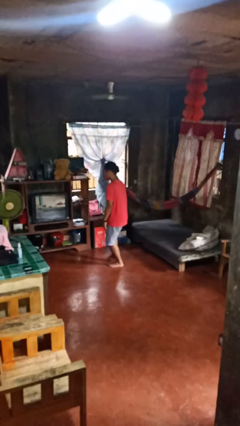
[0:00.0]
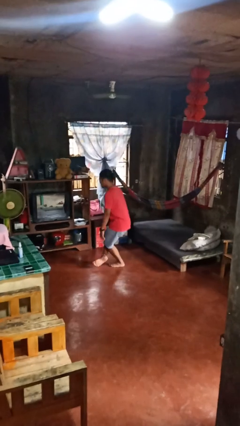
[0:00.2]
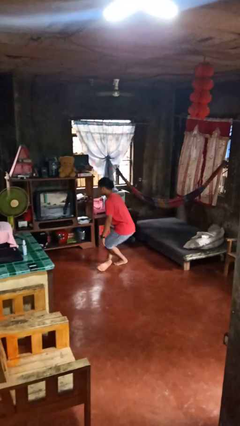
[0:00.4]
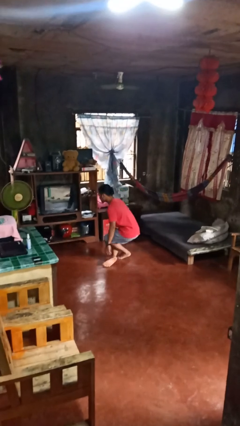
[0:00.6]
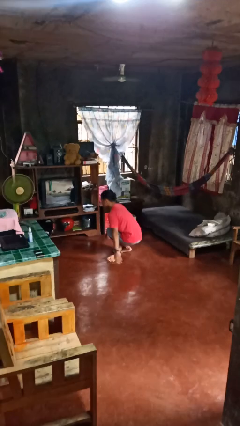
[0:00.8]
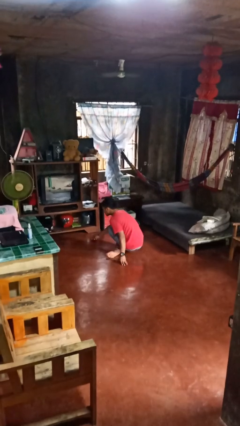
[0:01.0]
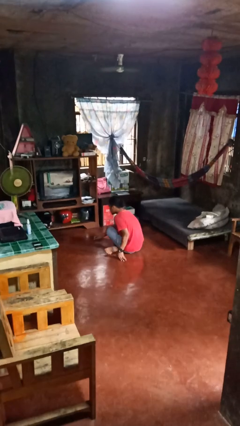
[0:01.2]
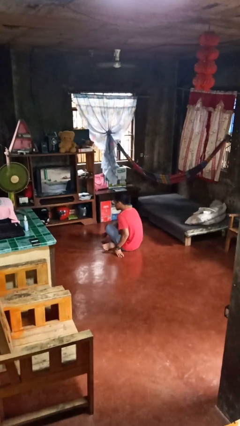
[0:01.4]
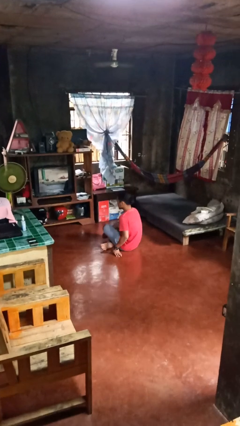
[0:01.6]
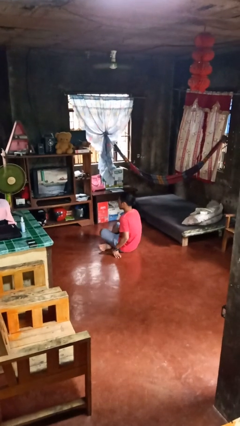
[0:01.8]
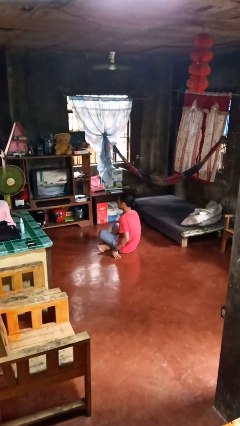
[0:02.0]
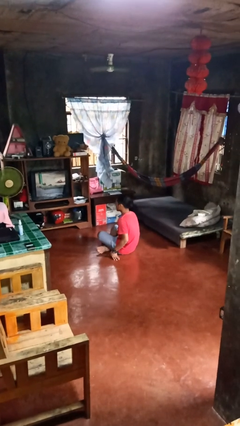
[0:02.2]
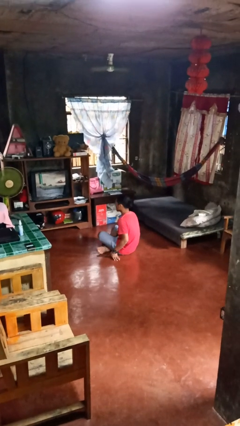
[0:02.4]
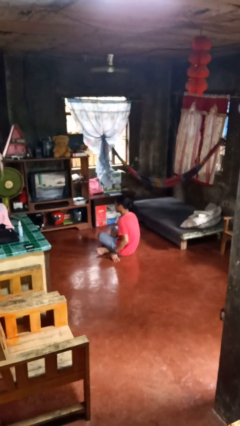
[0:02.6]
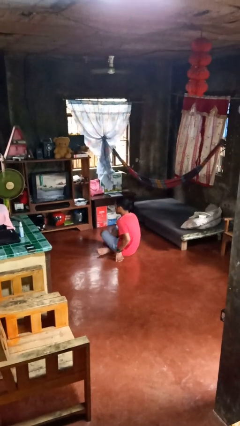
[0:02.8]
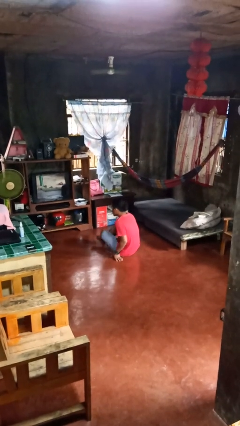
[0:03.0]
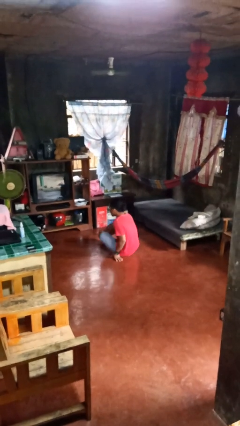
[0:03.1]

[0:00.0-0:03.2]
person sits crisscross

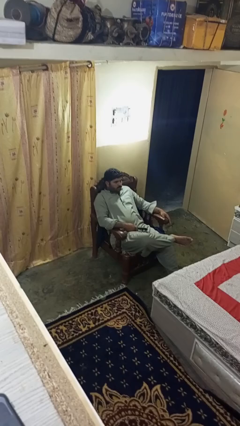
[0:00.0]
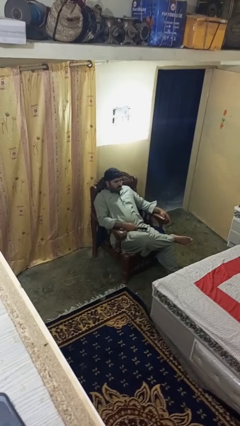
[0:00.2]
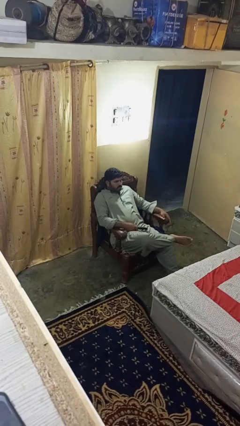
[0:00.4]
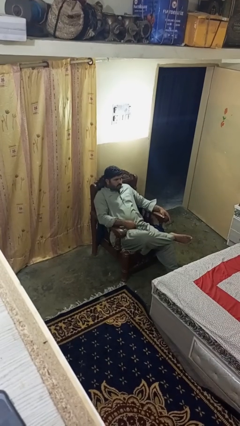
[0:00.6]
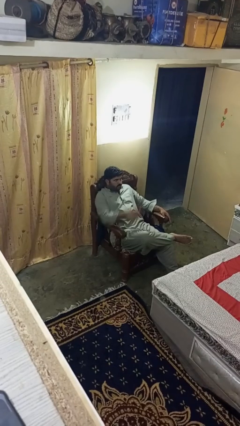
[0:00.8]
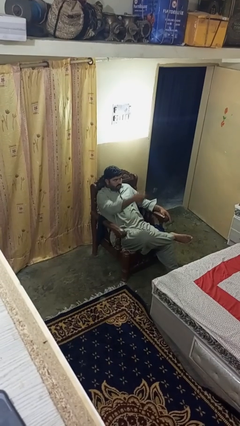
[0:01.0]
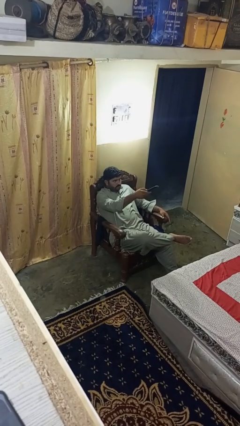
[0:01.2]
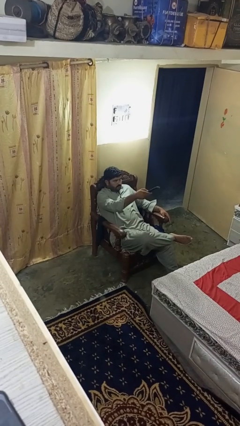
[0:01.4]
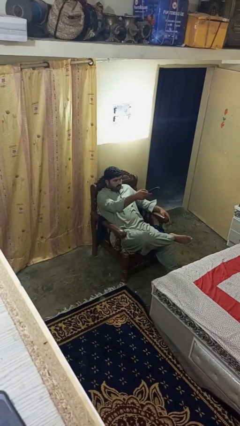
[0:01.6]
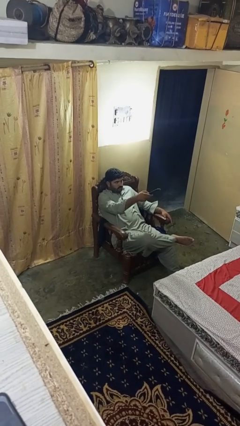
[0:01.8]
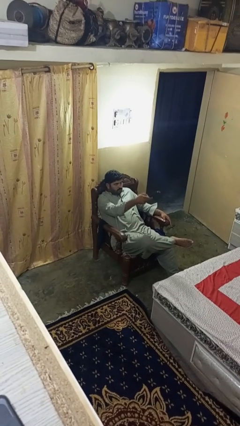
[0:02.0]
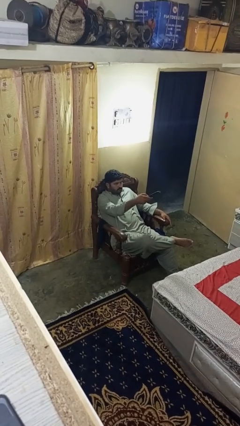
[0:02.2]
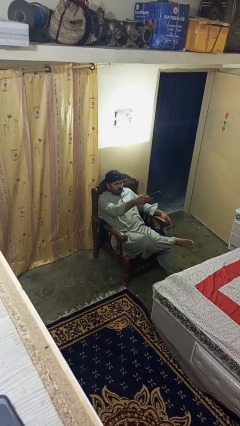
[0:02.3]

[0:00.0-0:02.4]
person uses television remote

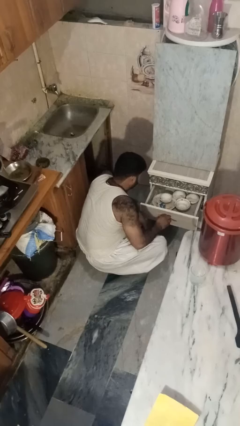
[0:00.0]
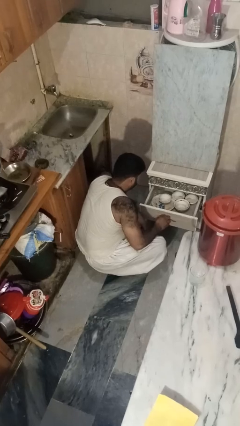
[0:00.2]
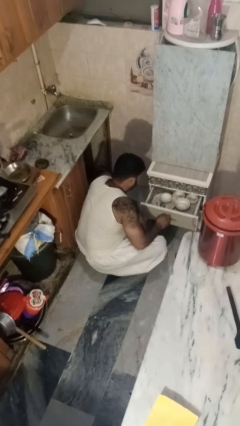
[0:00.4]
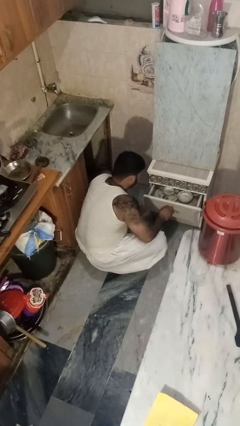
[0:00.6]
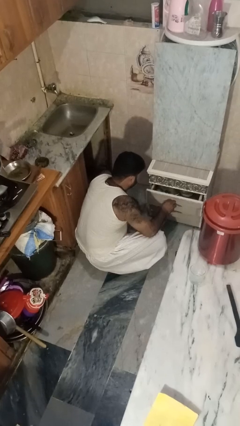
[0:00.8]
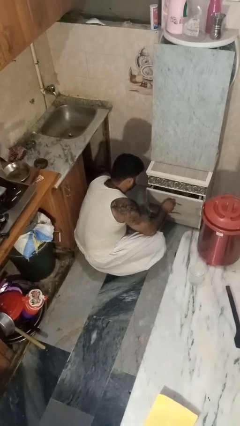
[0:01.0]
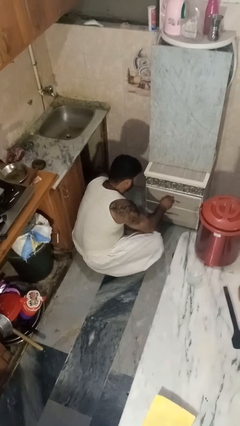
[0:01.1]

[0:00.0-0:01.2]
person closes kitchen drawer

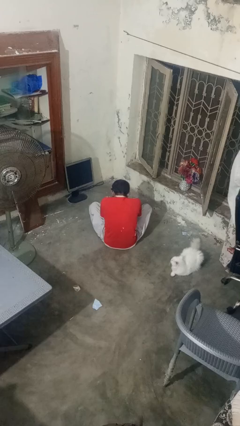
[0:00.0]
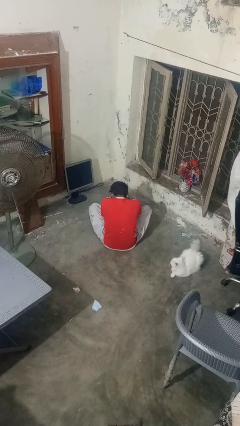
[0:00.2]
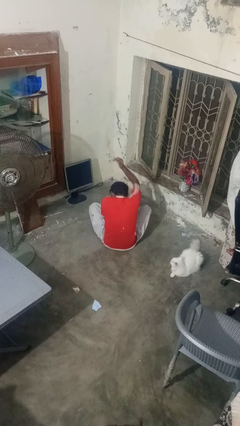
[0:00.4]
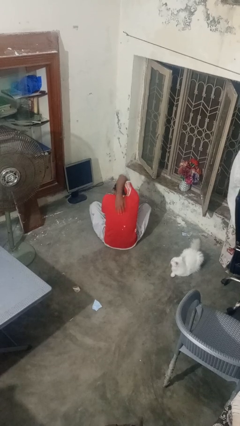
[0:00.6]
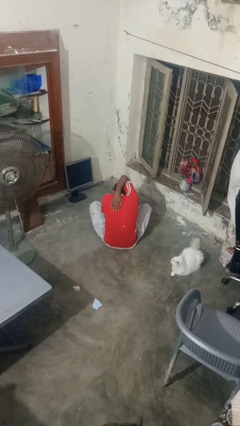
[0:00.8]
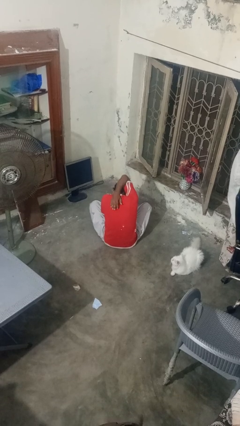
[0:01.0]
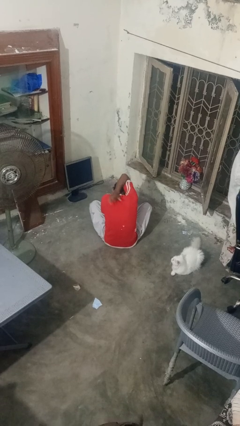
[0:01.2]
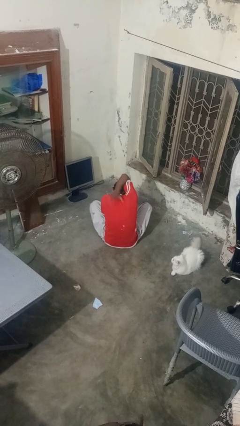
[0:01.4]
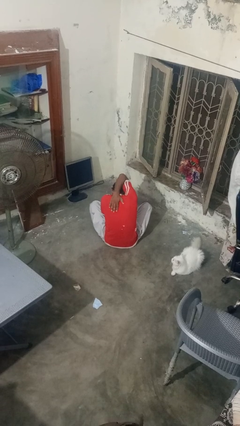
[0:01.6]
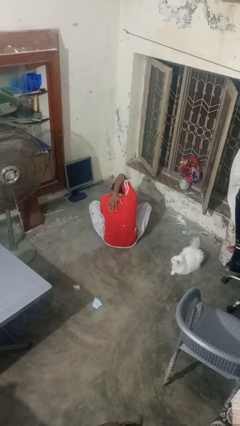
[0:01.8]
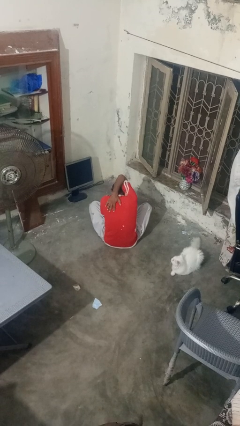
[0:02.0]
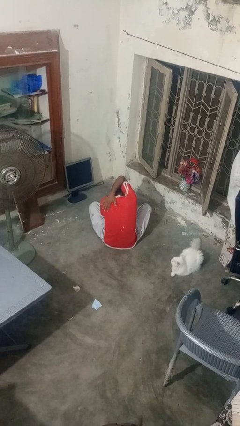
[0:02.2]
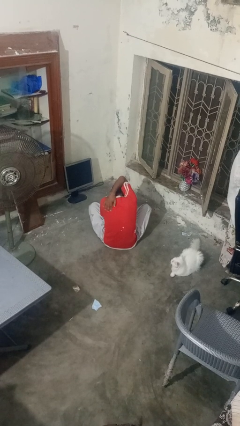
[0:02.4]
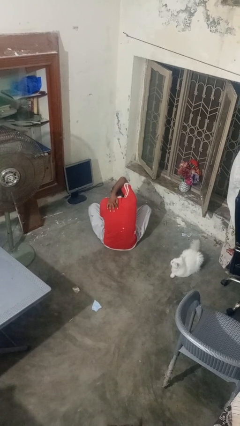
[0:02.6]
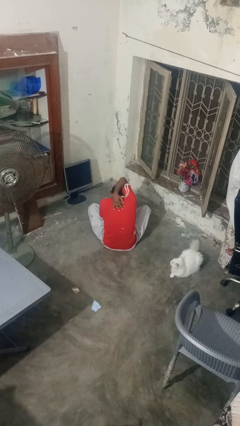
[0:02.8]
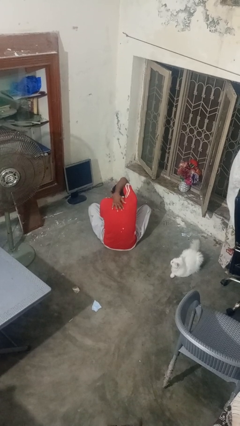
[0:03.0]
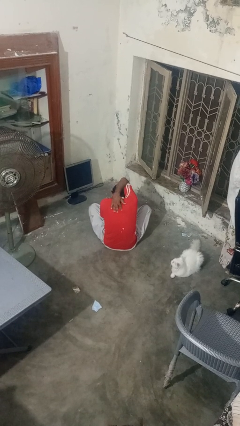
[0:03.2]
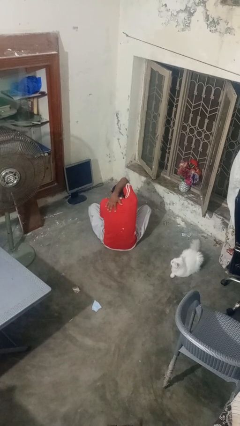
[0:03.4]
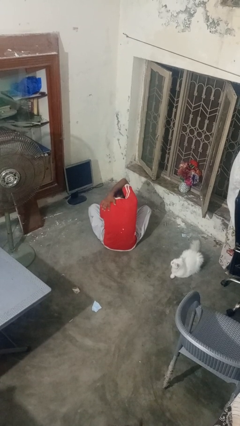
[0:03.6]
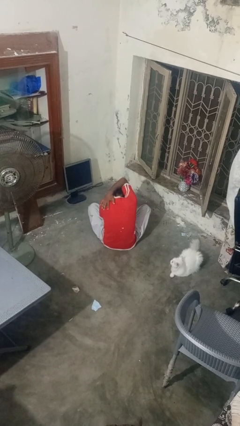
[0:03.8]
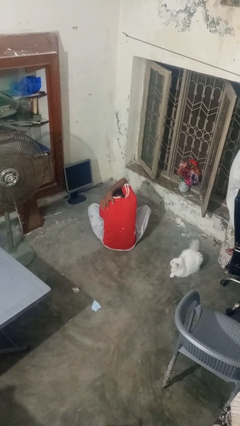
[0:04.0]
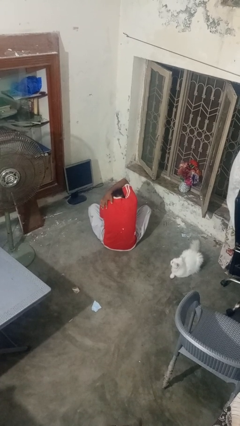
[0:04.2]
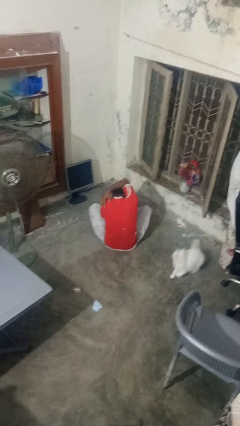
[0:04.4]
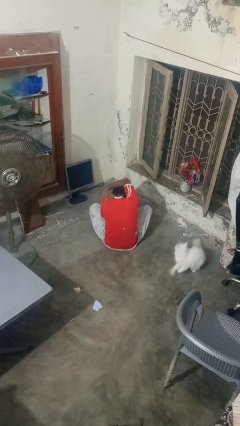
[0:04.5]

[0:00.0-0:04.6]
person swats bug

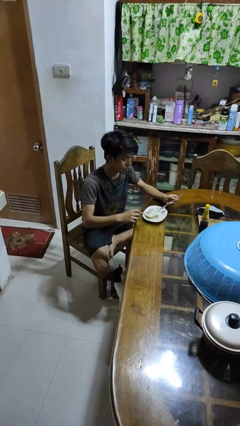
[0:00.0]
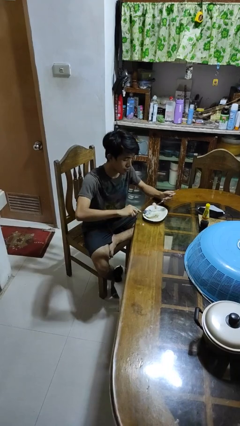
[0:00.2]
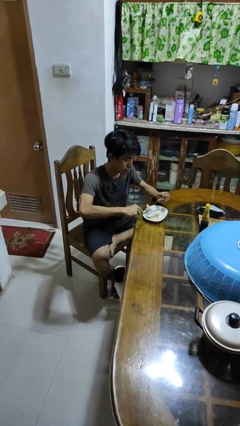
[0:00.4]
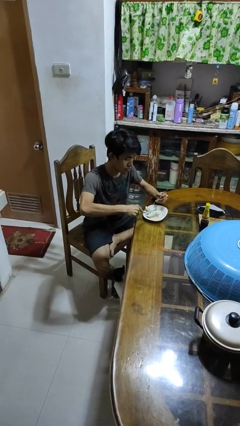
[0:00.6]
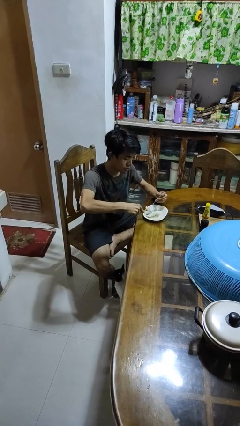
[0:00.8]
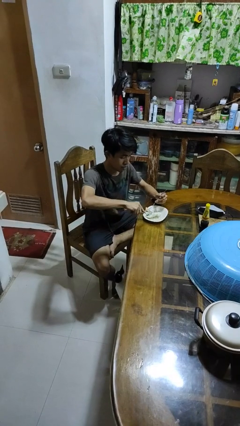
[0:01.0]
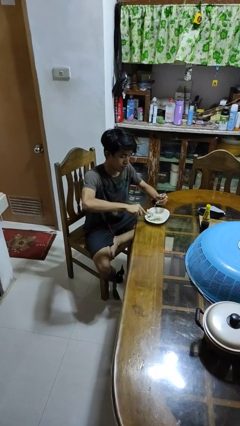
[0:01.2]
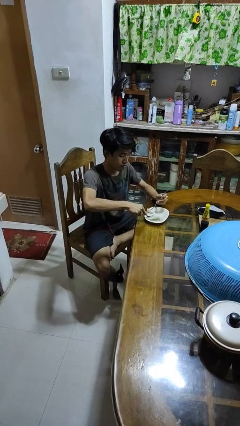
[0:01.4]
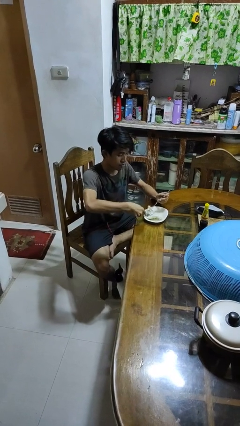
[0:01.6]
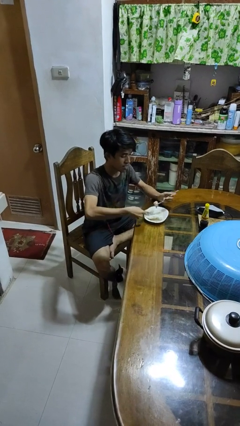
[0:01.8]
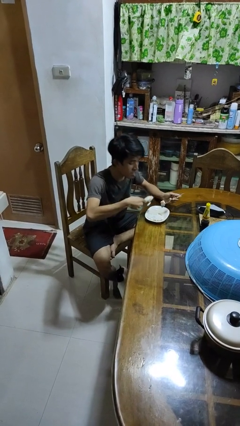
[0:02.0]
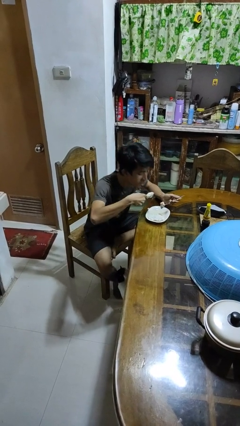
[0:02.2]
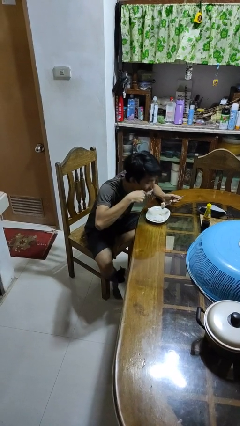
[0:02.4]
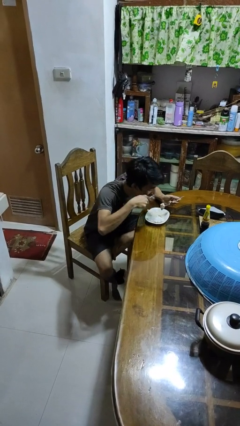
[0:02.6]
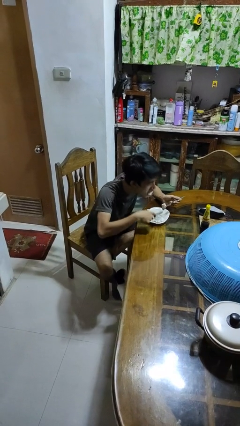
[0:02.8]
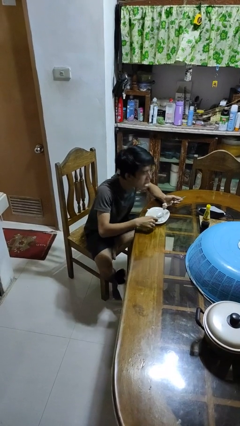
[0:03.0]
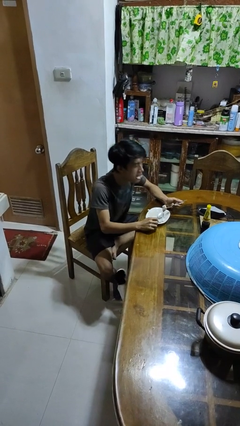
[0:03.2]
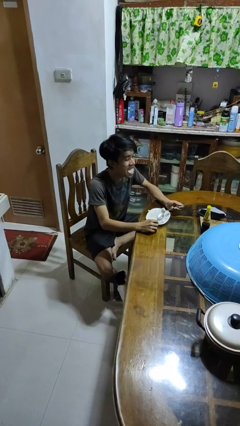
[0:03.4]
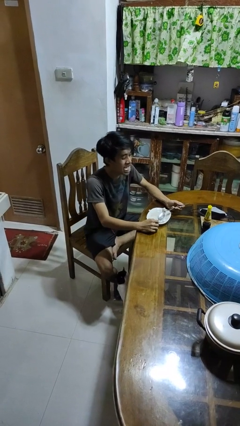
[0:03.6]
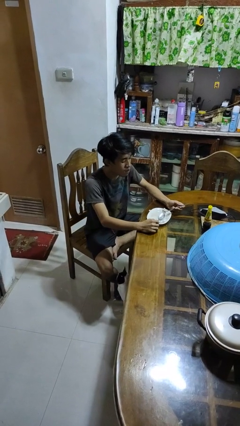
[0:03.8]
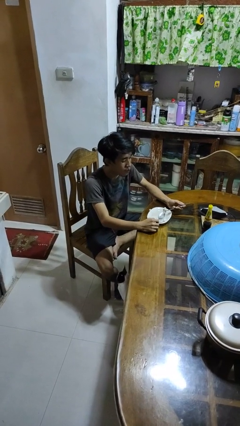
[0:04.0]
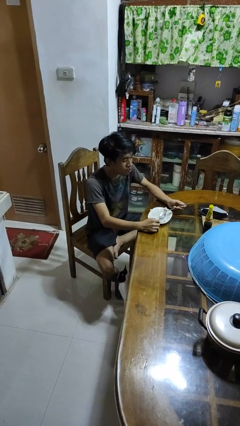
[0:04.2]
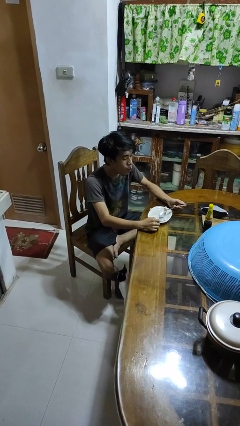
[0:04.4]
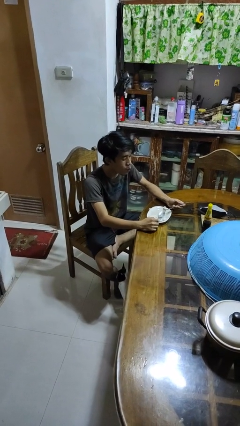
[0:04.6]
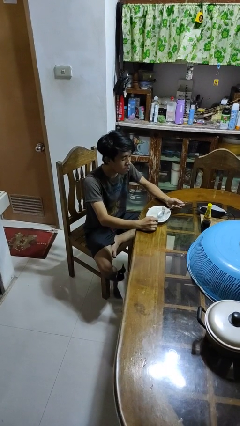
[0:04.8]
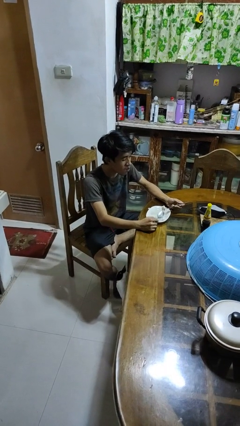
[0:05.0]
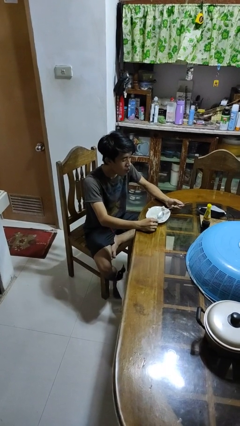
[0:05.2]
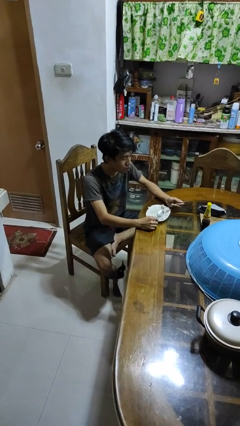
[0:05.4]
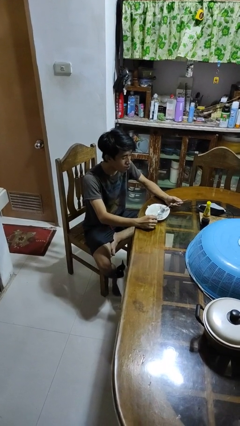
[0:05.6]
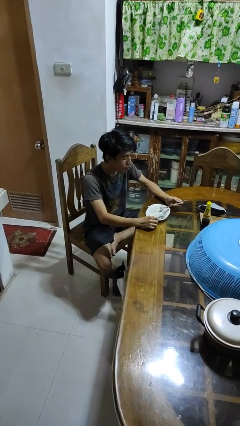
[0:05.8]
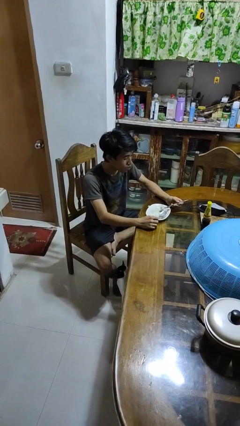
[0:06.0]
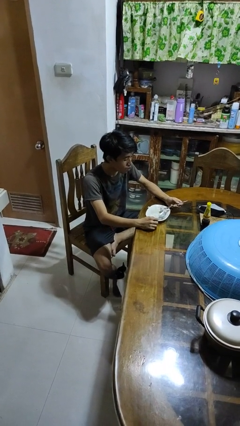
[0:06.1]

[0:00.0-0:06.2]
person eats with utensil

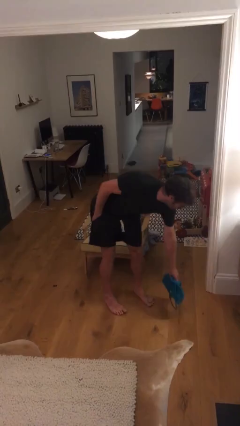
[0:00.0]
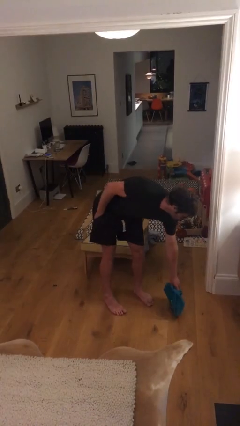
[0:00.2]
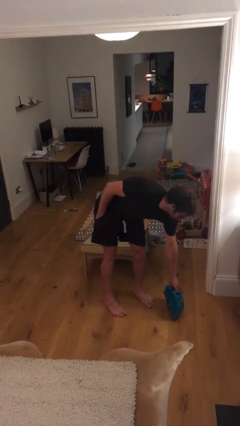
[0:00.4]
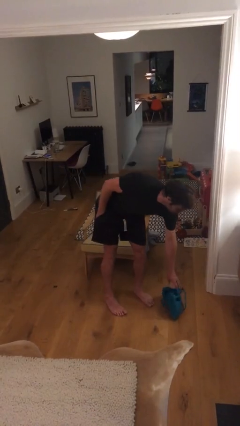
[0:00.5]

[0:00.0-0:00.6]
person puts down object on floor
